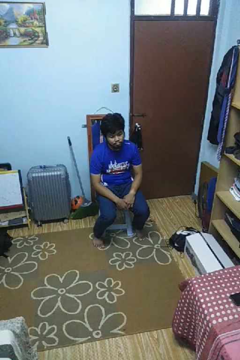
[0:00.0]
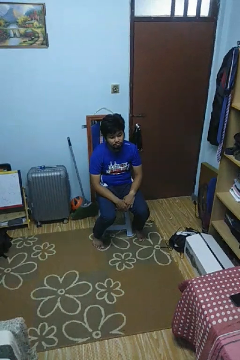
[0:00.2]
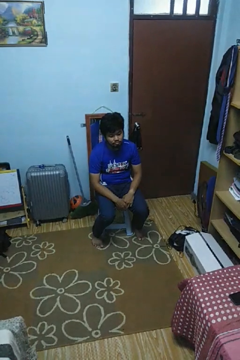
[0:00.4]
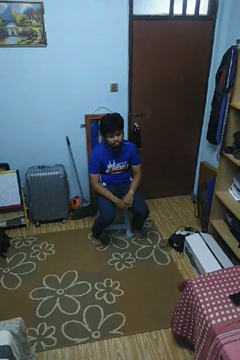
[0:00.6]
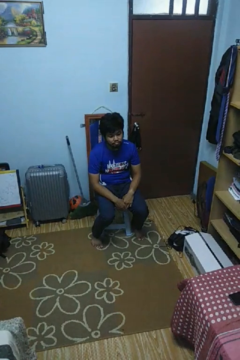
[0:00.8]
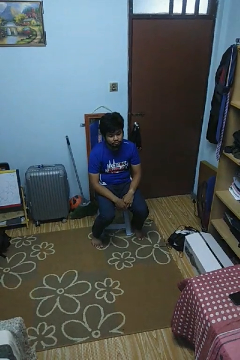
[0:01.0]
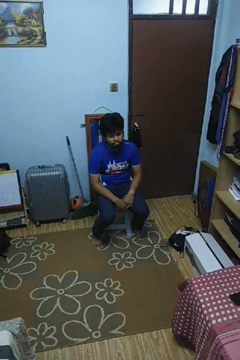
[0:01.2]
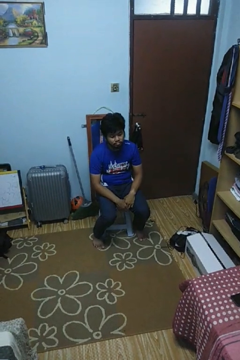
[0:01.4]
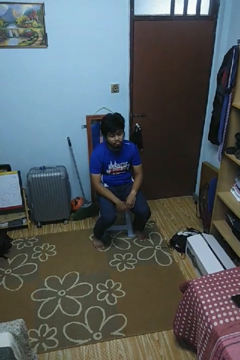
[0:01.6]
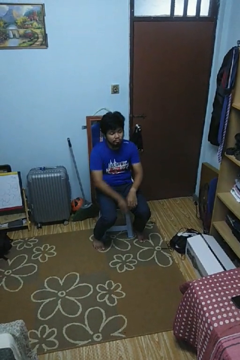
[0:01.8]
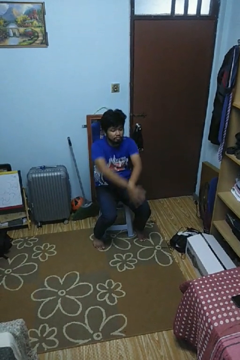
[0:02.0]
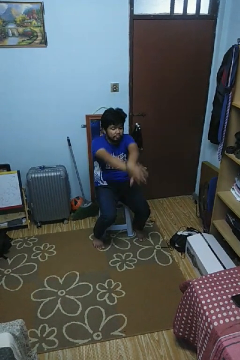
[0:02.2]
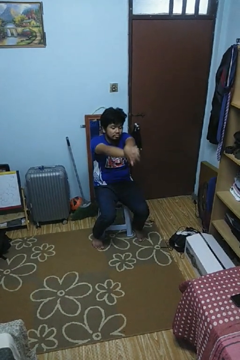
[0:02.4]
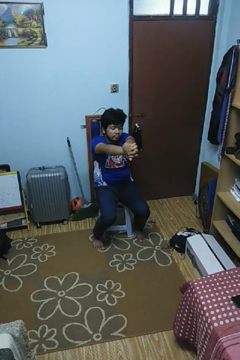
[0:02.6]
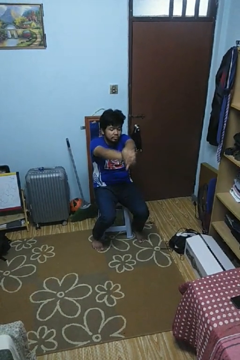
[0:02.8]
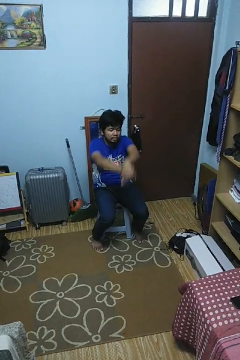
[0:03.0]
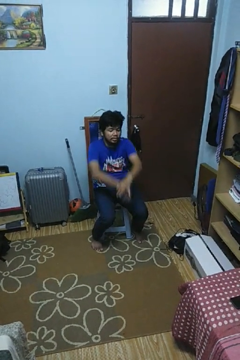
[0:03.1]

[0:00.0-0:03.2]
person crosses arms

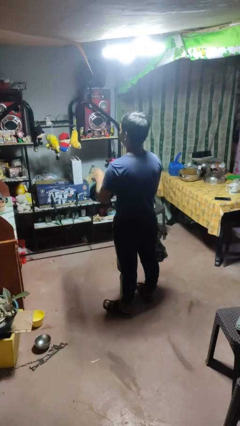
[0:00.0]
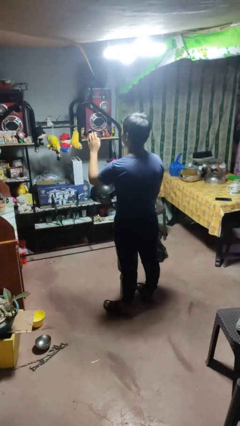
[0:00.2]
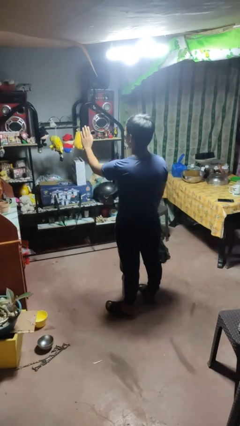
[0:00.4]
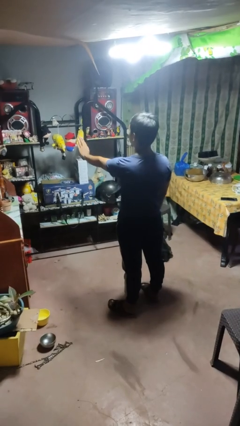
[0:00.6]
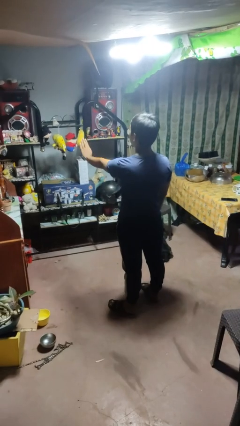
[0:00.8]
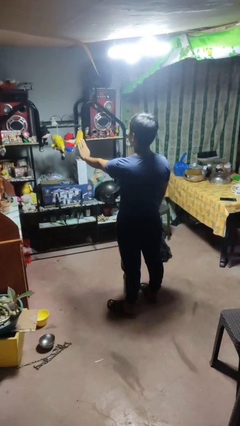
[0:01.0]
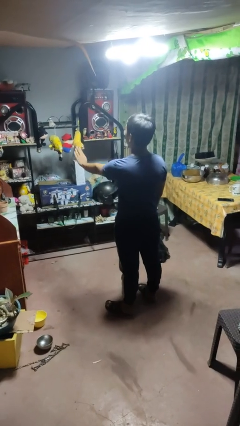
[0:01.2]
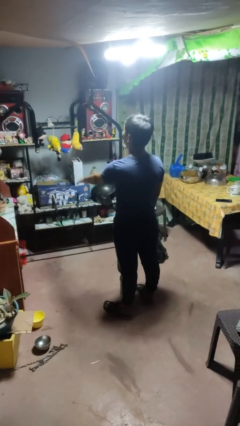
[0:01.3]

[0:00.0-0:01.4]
person gestures stop

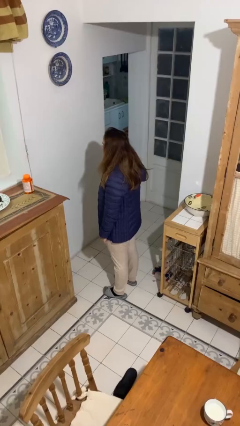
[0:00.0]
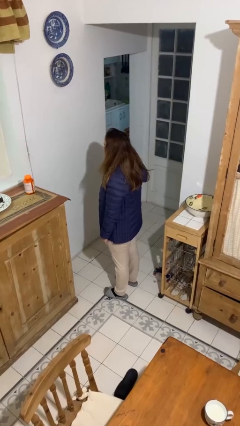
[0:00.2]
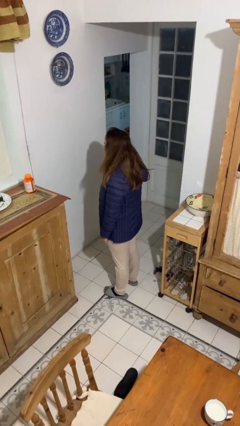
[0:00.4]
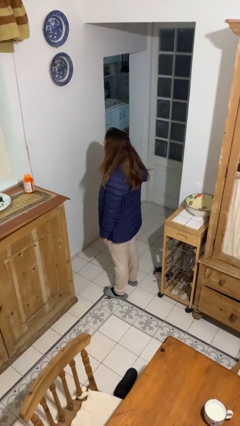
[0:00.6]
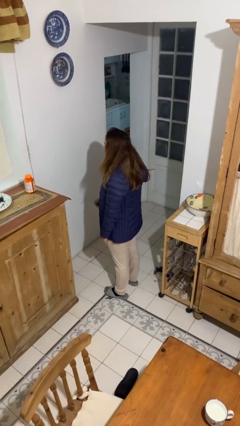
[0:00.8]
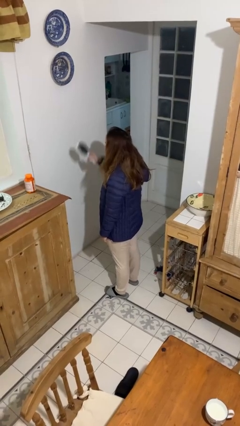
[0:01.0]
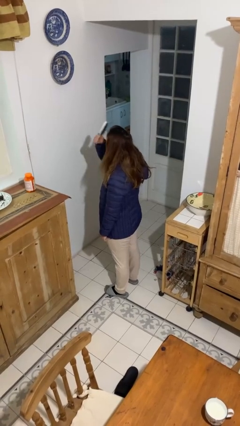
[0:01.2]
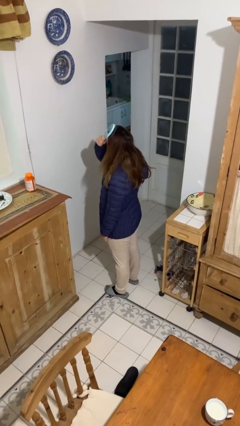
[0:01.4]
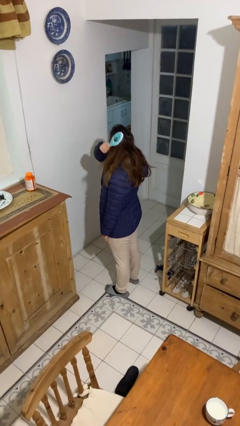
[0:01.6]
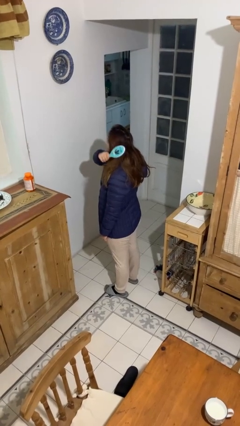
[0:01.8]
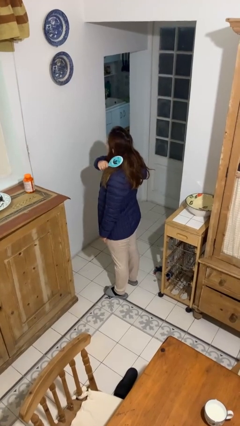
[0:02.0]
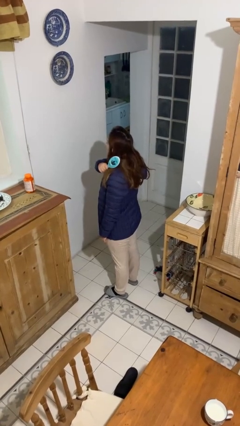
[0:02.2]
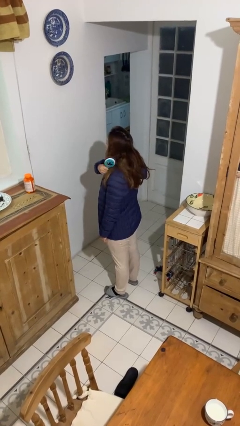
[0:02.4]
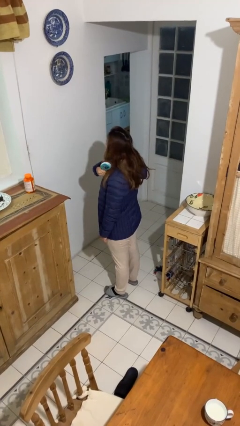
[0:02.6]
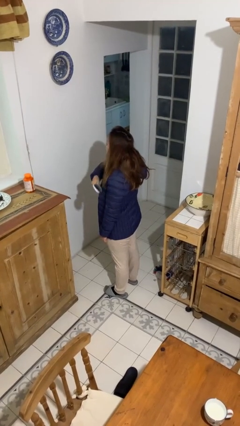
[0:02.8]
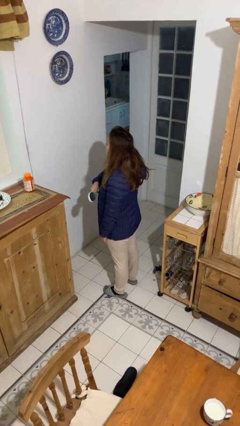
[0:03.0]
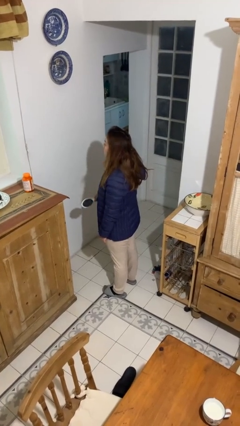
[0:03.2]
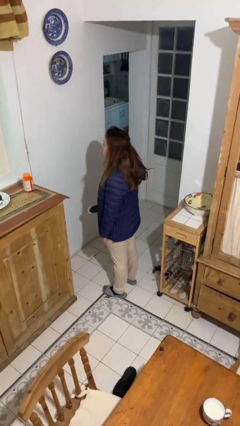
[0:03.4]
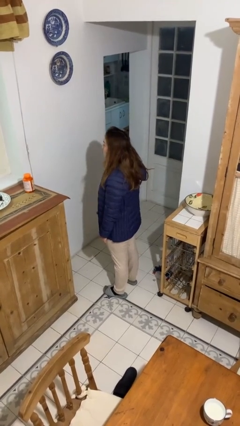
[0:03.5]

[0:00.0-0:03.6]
person brushes hair

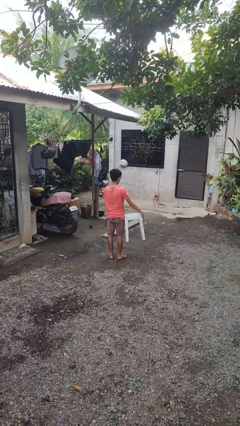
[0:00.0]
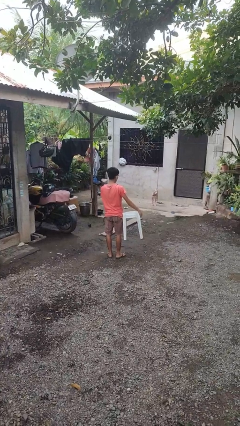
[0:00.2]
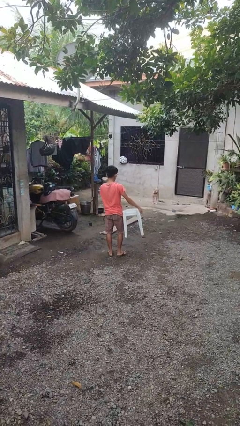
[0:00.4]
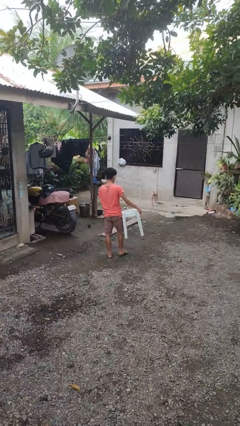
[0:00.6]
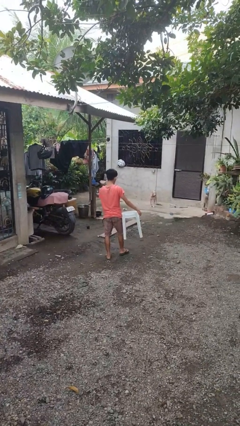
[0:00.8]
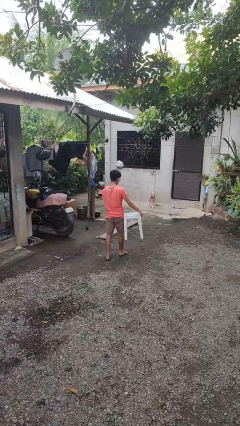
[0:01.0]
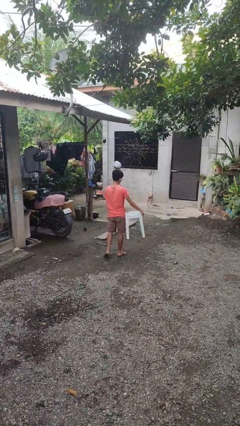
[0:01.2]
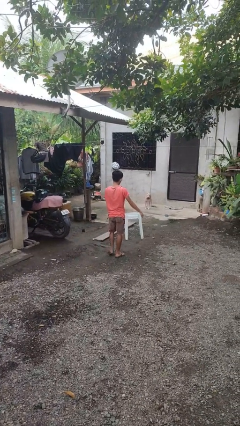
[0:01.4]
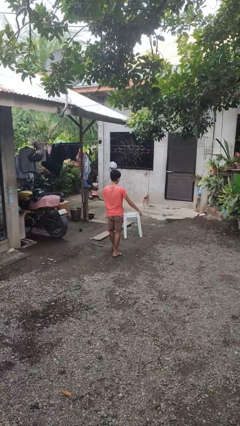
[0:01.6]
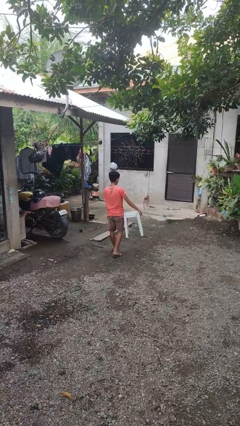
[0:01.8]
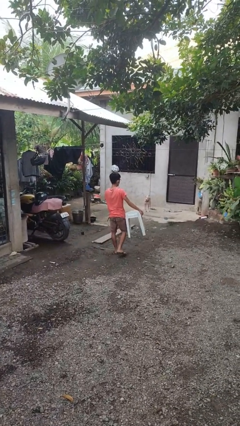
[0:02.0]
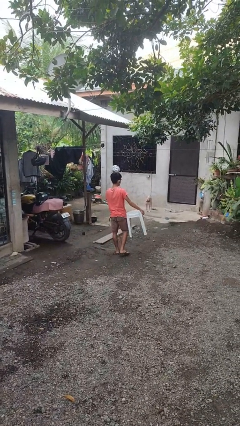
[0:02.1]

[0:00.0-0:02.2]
person carries furniture

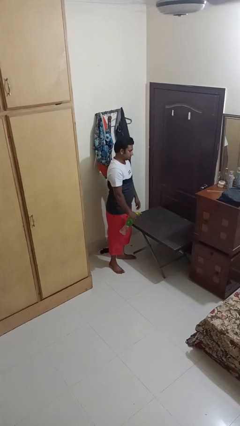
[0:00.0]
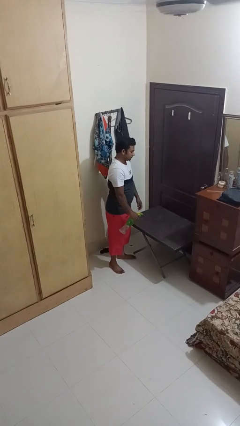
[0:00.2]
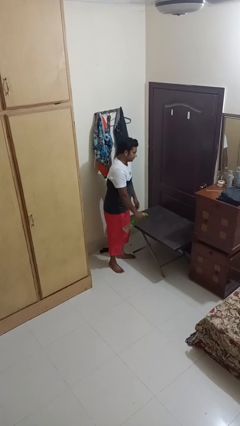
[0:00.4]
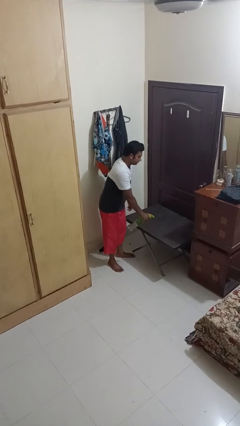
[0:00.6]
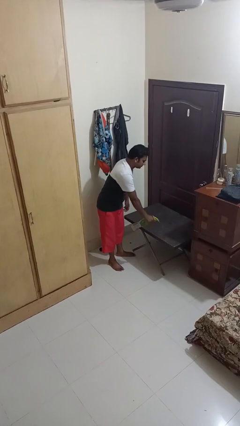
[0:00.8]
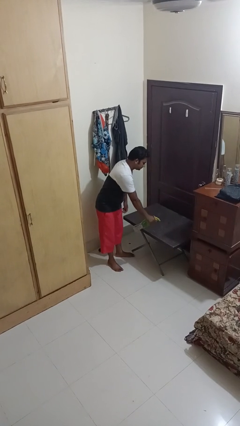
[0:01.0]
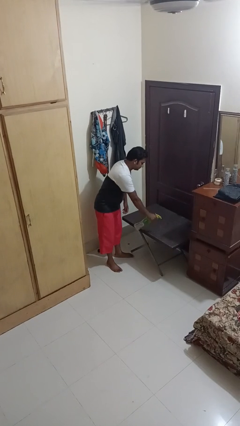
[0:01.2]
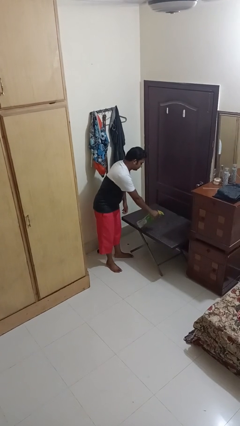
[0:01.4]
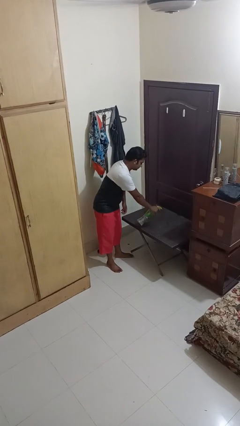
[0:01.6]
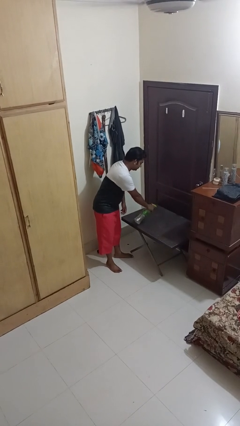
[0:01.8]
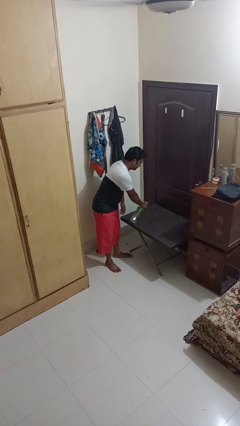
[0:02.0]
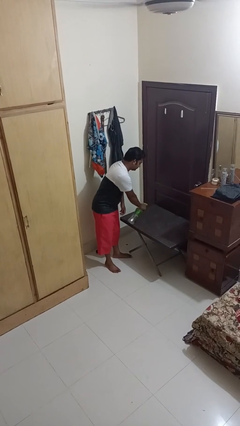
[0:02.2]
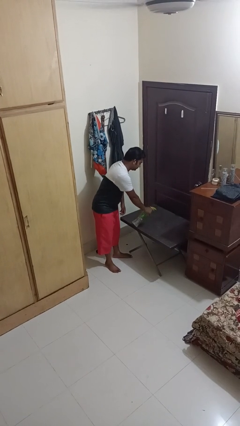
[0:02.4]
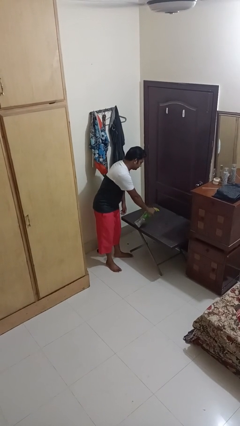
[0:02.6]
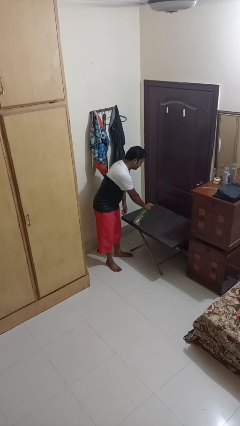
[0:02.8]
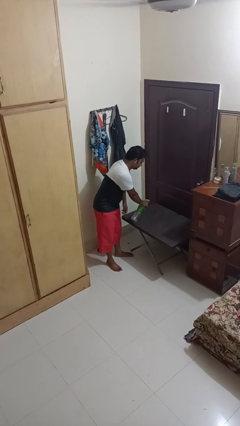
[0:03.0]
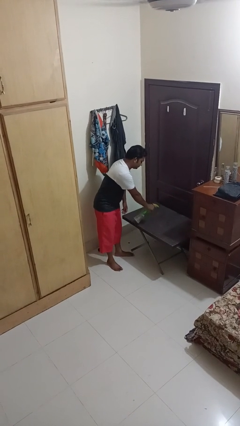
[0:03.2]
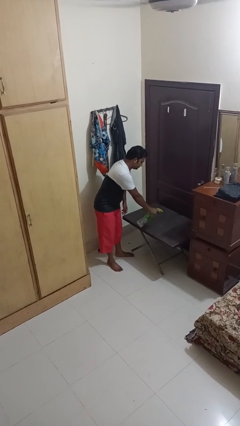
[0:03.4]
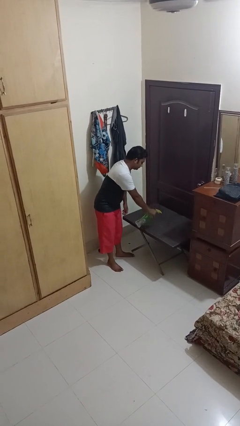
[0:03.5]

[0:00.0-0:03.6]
person sprays from bottle

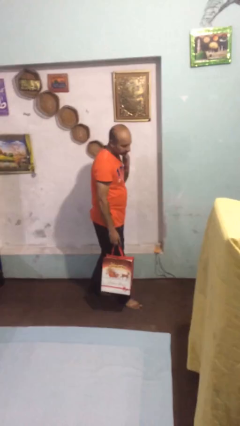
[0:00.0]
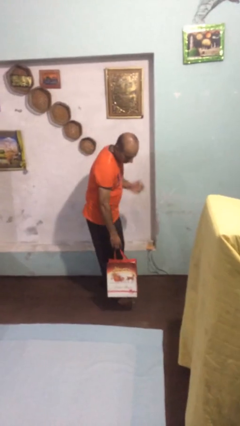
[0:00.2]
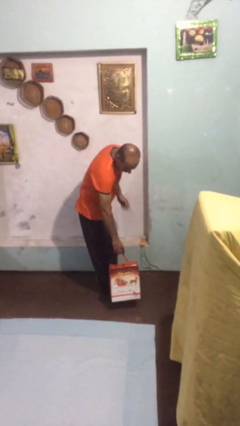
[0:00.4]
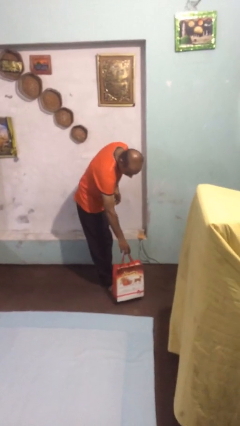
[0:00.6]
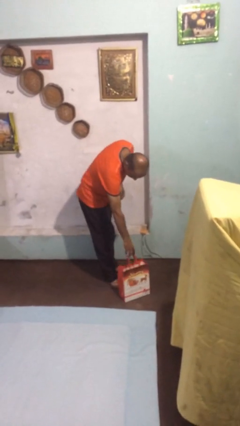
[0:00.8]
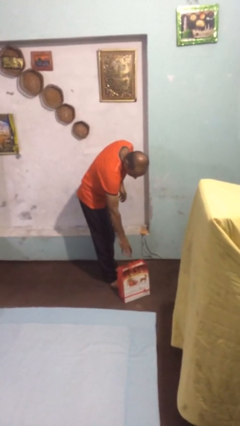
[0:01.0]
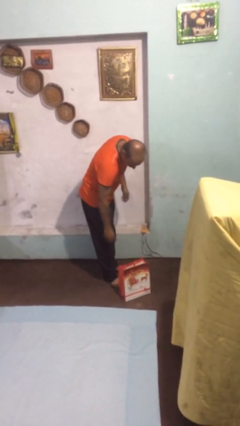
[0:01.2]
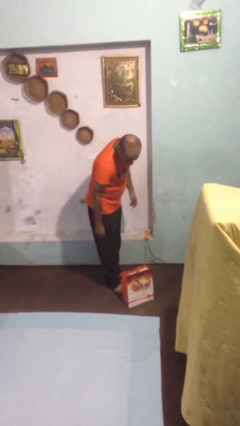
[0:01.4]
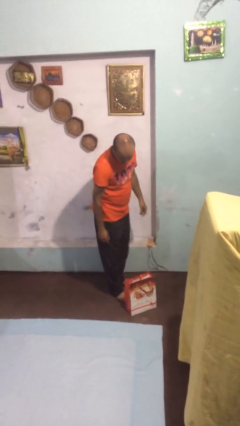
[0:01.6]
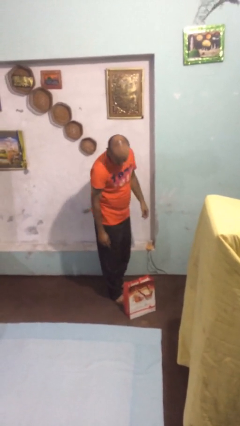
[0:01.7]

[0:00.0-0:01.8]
person puts down object on floor

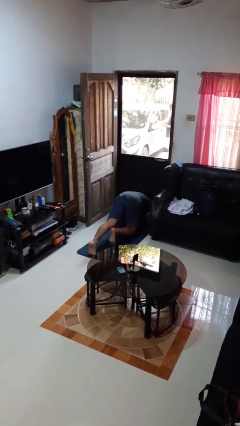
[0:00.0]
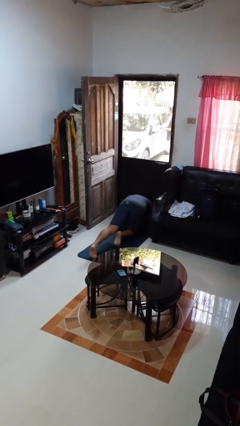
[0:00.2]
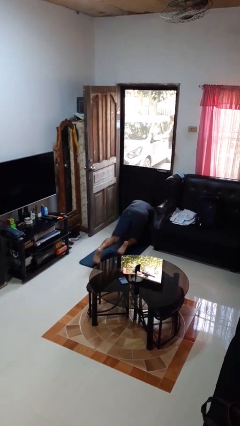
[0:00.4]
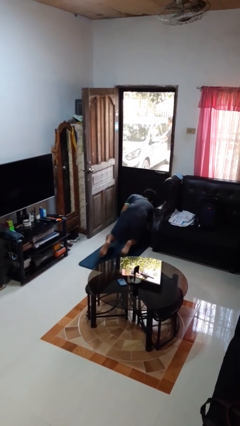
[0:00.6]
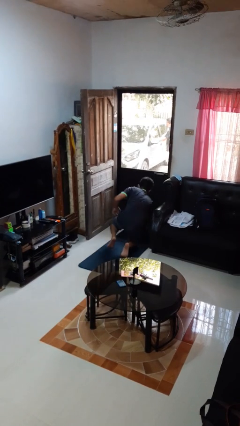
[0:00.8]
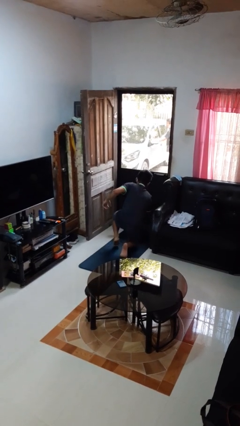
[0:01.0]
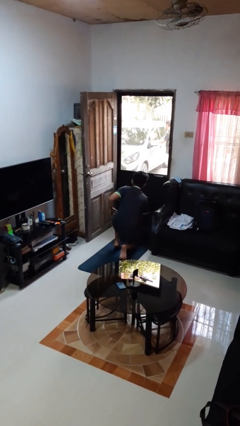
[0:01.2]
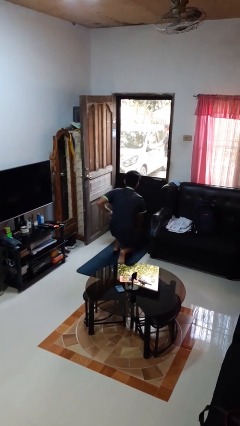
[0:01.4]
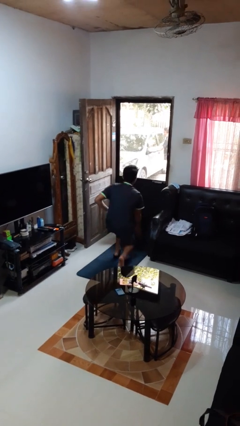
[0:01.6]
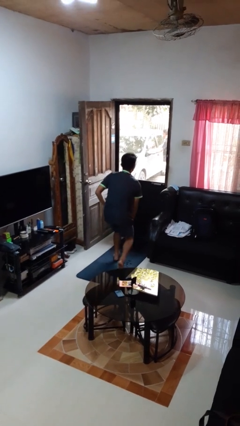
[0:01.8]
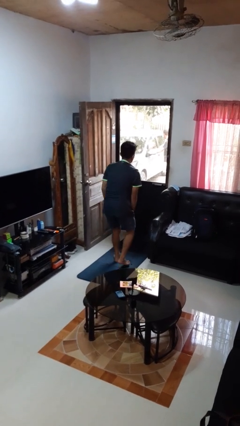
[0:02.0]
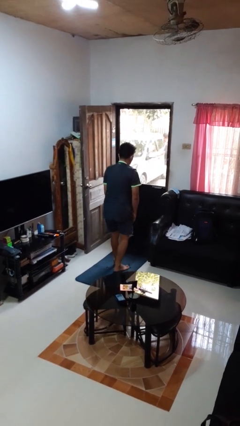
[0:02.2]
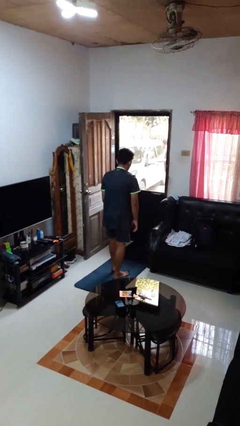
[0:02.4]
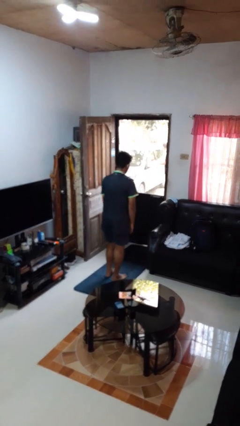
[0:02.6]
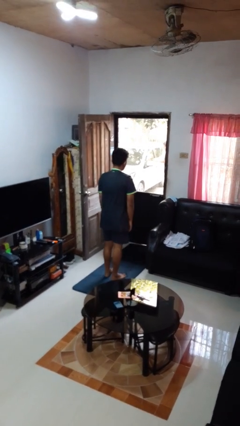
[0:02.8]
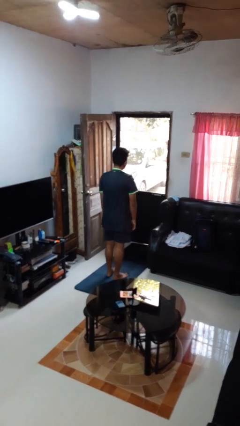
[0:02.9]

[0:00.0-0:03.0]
person stands up from floor
